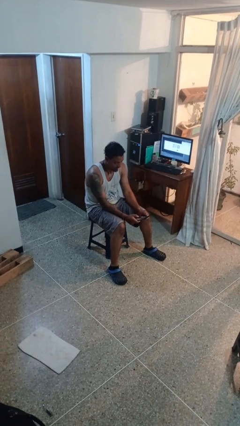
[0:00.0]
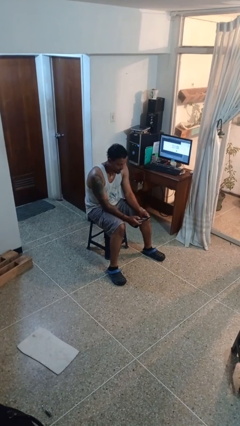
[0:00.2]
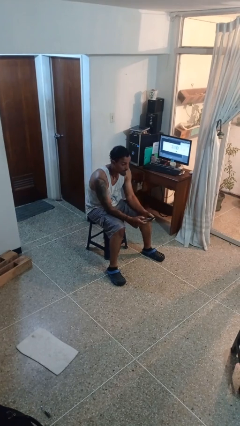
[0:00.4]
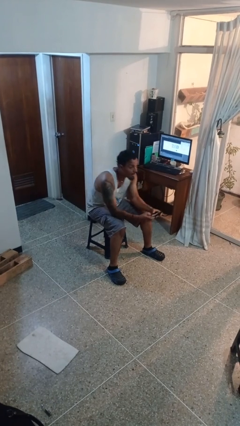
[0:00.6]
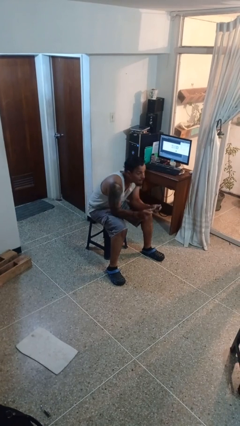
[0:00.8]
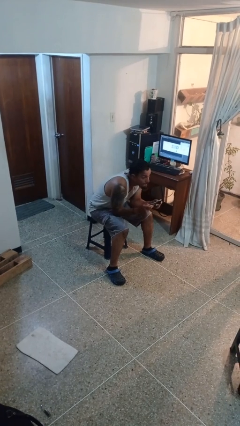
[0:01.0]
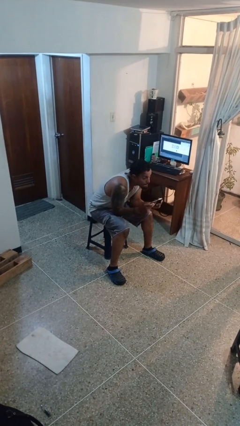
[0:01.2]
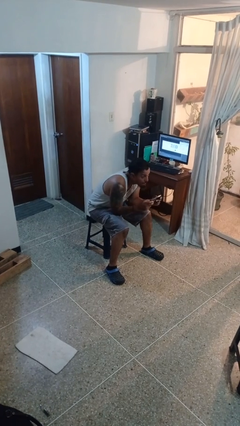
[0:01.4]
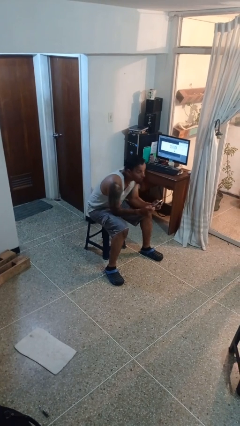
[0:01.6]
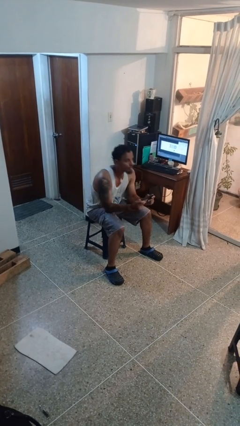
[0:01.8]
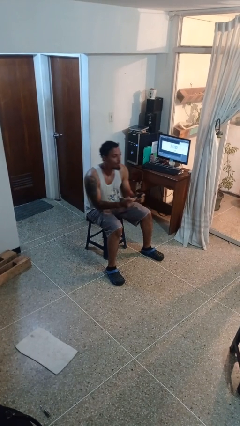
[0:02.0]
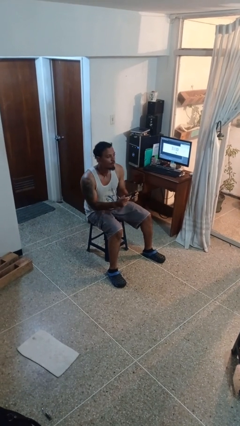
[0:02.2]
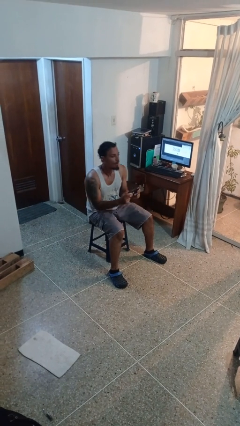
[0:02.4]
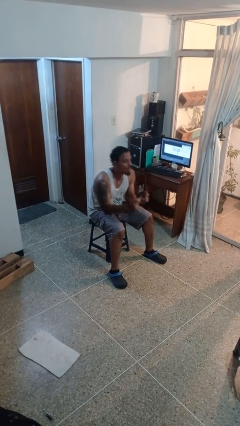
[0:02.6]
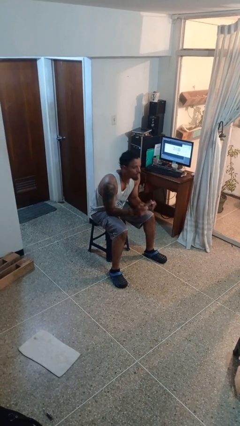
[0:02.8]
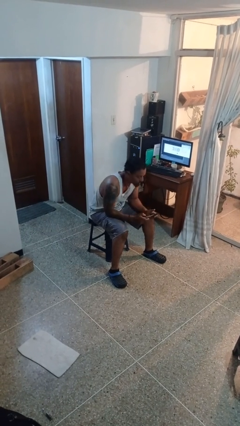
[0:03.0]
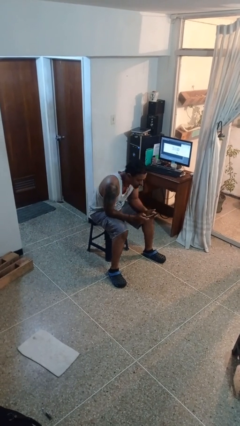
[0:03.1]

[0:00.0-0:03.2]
person interacts with handheld game

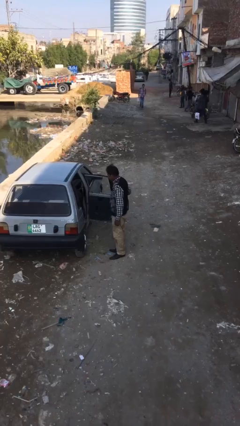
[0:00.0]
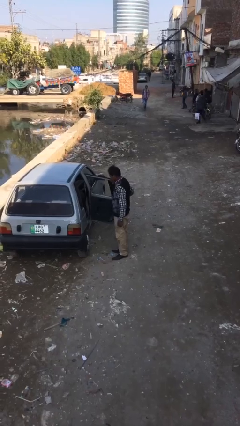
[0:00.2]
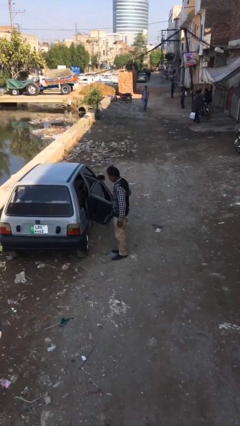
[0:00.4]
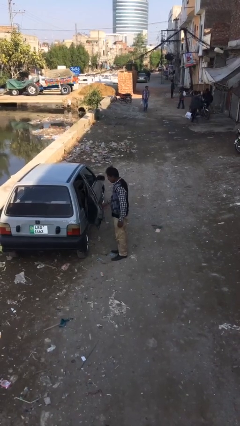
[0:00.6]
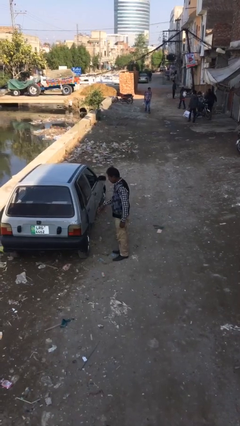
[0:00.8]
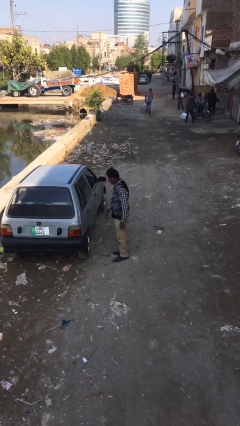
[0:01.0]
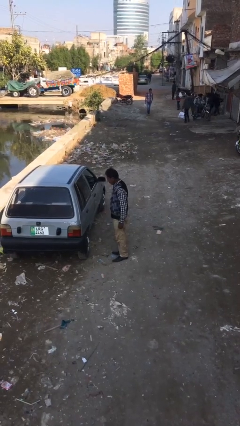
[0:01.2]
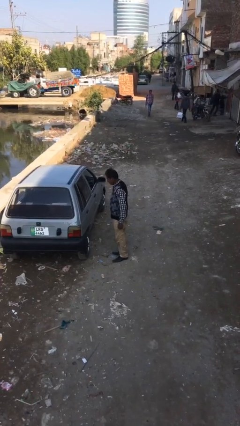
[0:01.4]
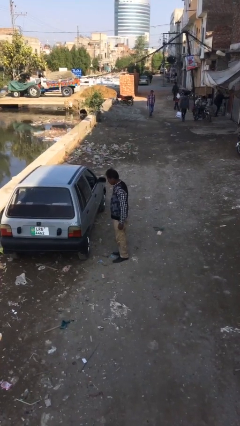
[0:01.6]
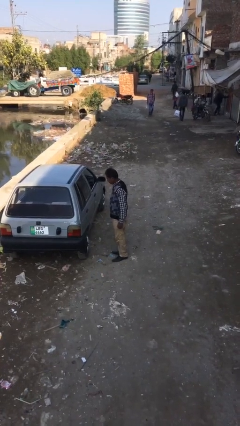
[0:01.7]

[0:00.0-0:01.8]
person closes car door

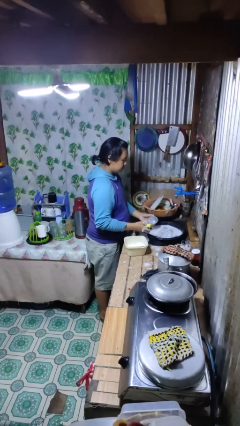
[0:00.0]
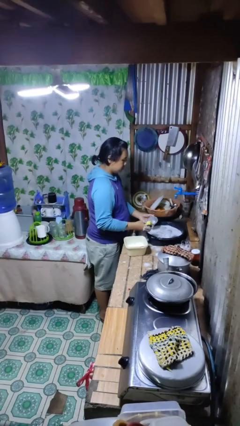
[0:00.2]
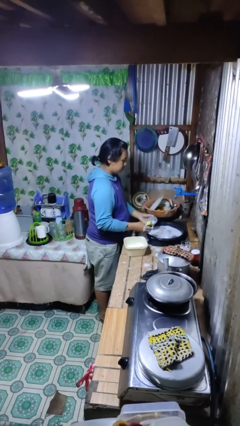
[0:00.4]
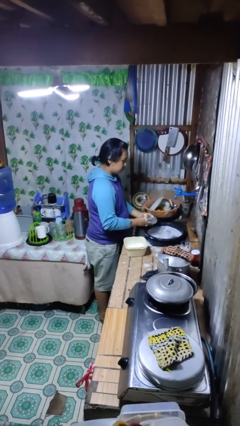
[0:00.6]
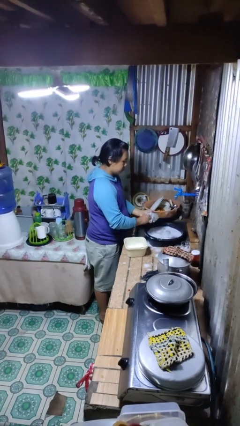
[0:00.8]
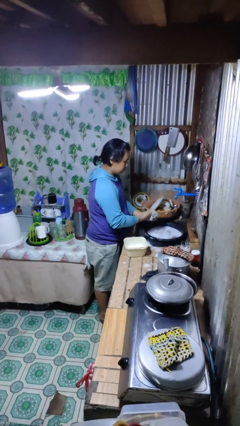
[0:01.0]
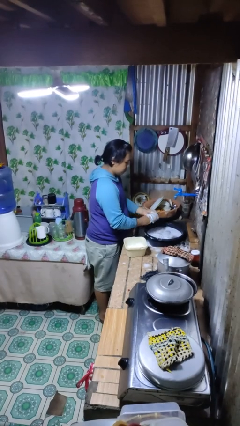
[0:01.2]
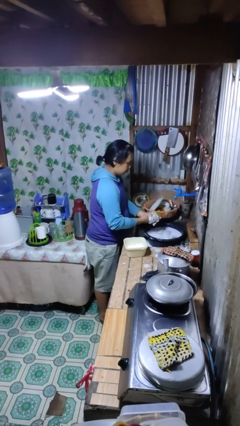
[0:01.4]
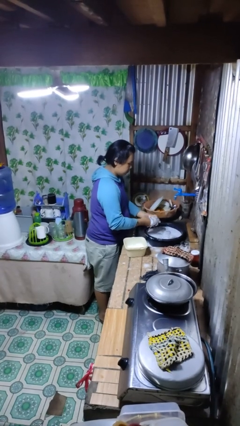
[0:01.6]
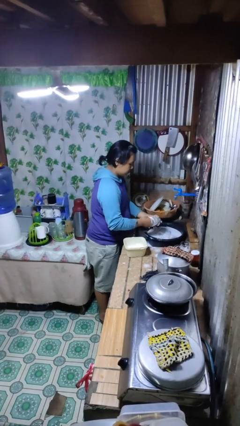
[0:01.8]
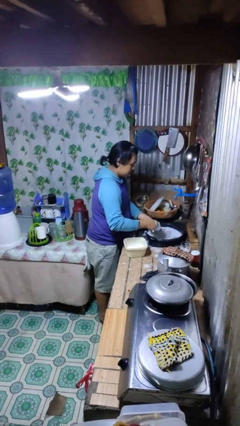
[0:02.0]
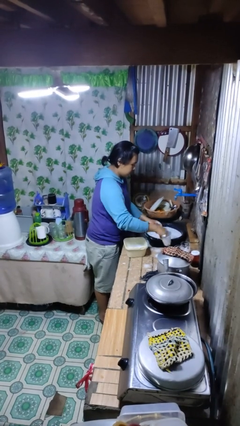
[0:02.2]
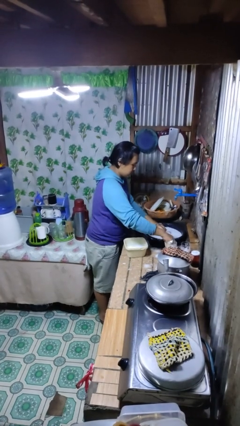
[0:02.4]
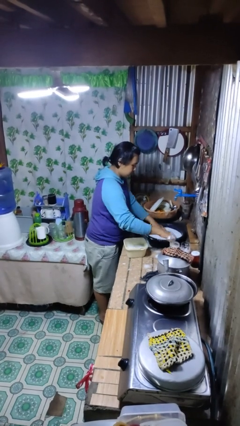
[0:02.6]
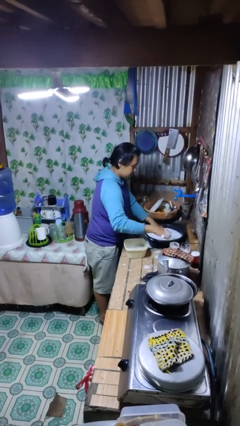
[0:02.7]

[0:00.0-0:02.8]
person washes dish

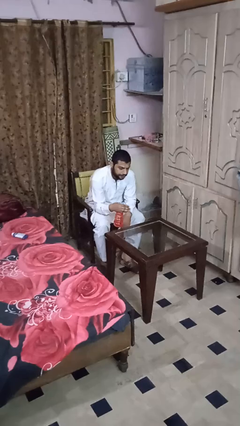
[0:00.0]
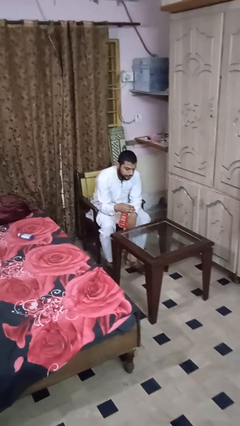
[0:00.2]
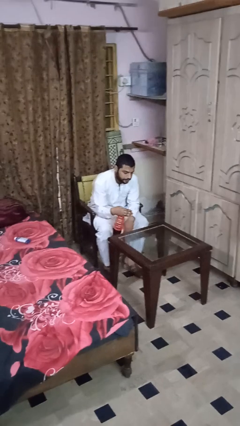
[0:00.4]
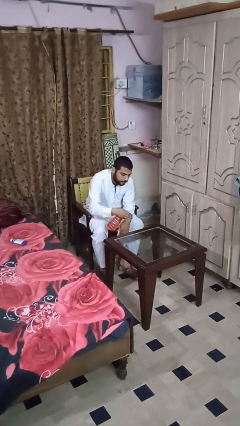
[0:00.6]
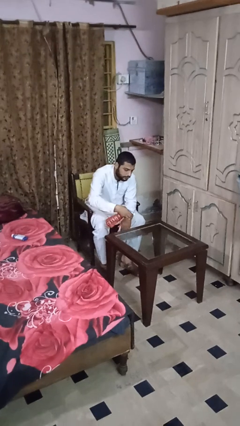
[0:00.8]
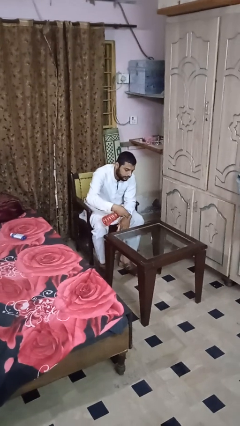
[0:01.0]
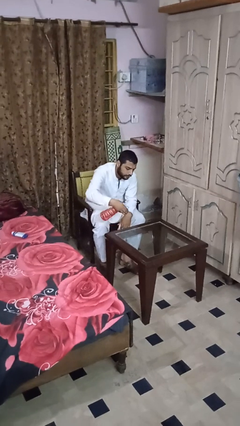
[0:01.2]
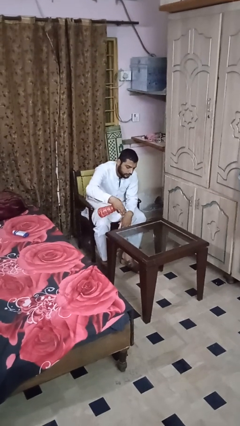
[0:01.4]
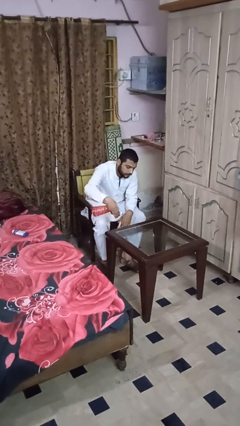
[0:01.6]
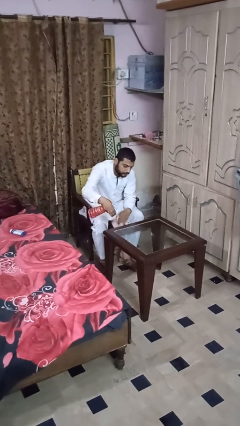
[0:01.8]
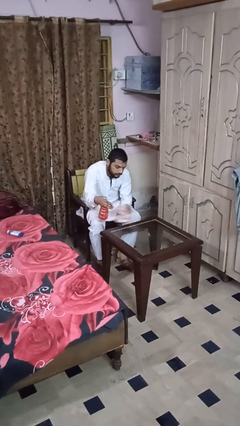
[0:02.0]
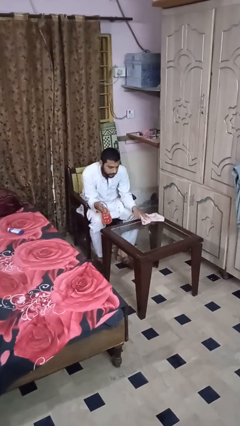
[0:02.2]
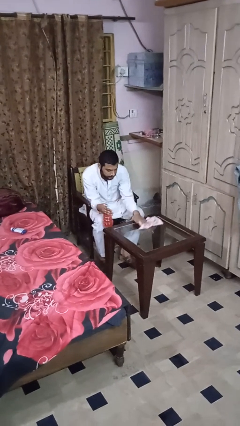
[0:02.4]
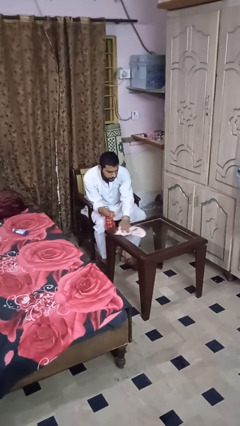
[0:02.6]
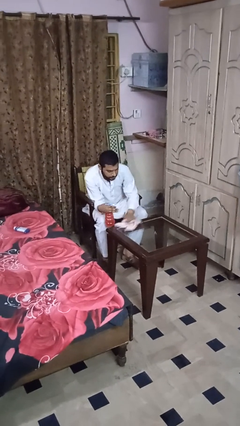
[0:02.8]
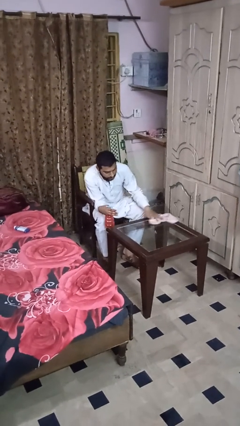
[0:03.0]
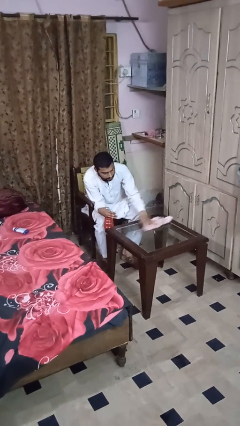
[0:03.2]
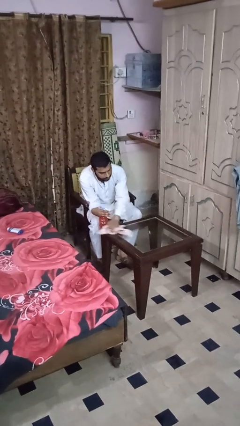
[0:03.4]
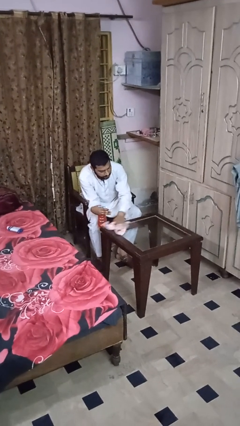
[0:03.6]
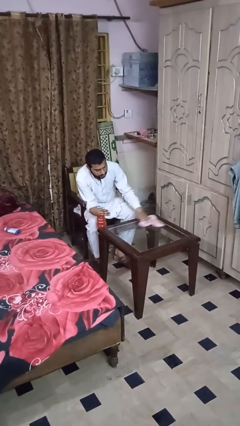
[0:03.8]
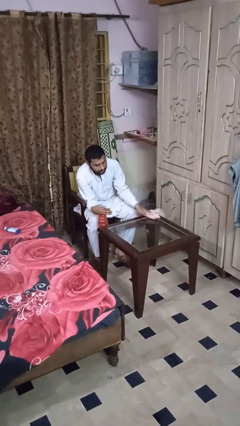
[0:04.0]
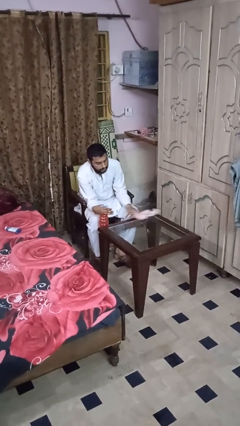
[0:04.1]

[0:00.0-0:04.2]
person sprays from bottle

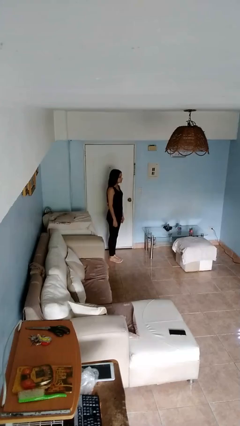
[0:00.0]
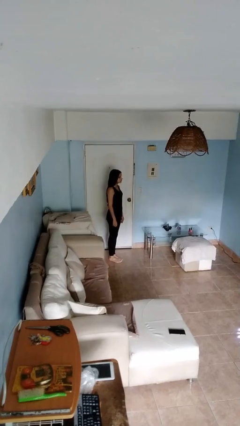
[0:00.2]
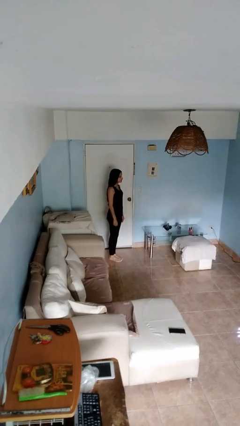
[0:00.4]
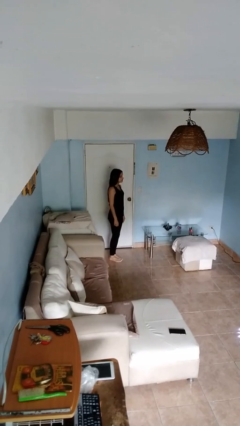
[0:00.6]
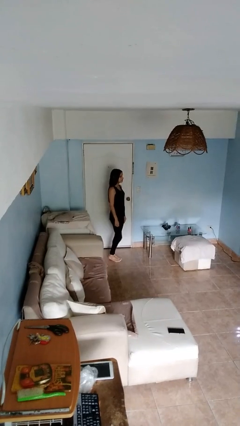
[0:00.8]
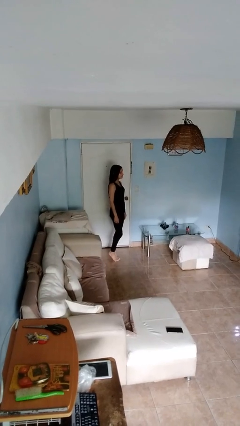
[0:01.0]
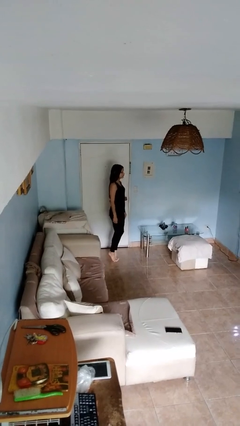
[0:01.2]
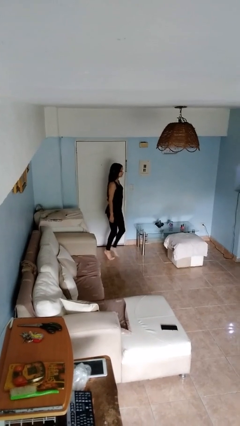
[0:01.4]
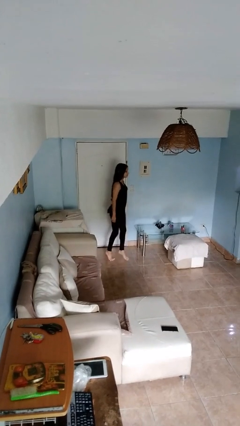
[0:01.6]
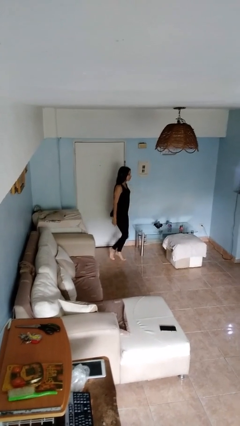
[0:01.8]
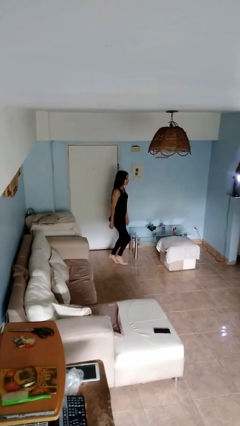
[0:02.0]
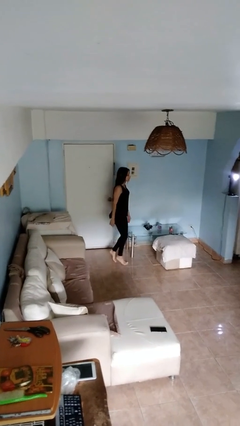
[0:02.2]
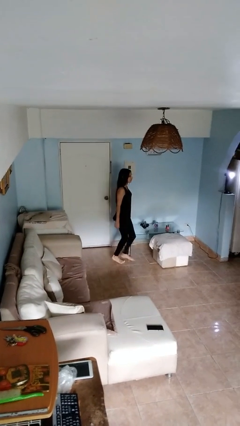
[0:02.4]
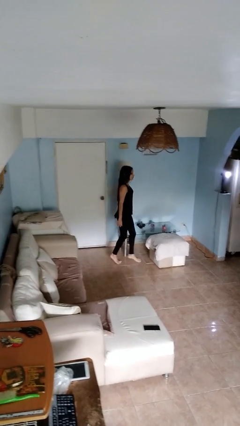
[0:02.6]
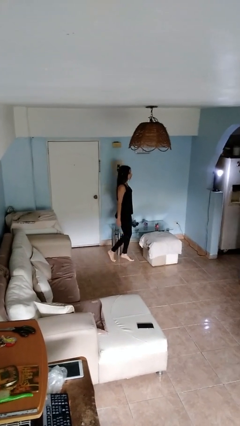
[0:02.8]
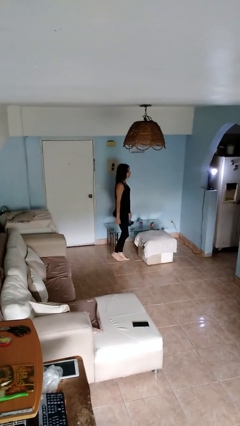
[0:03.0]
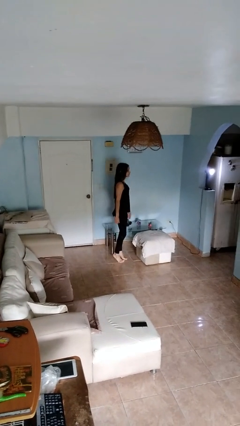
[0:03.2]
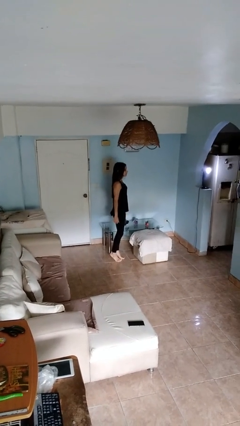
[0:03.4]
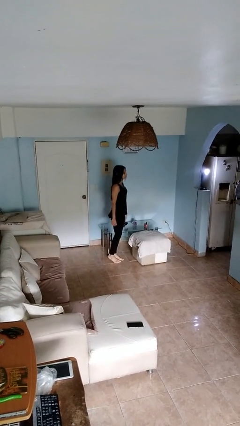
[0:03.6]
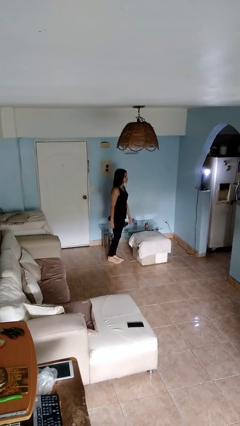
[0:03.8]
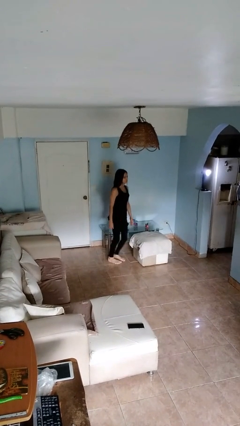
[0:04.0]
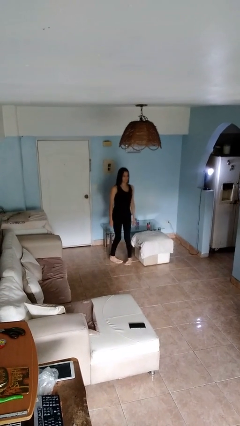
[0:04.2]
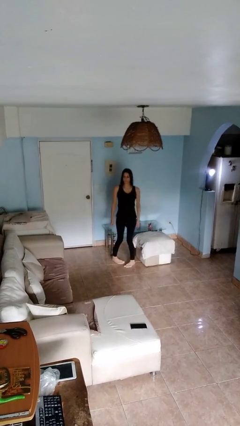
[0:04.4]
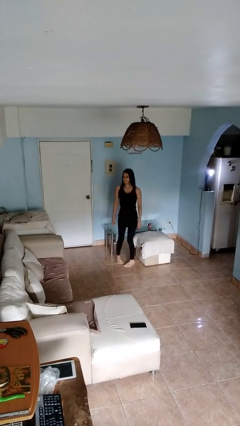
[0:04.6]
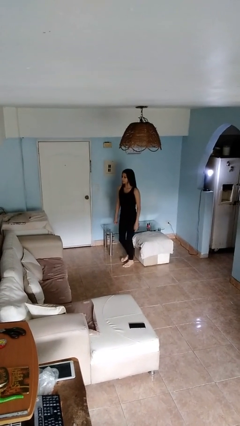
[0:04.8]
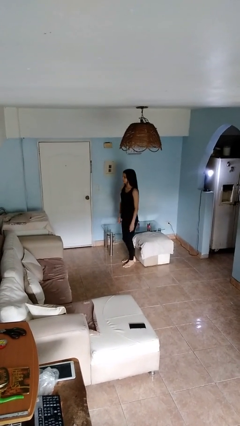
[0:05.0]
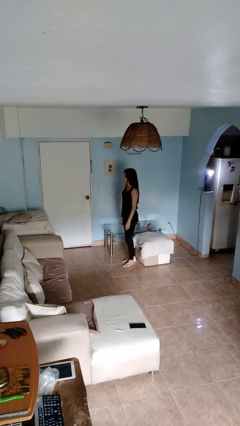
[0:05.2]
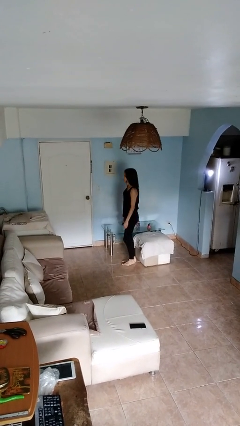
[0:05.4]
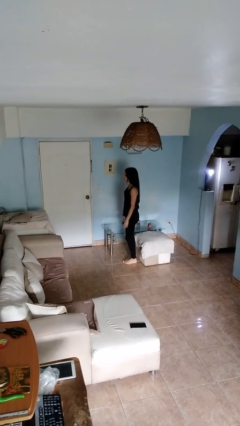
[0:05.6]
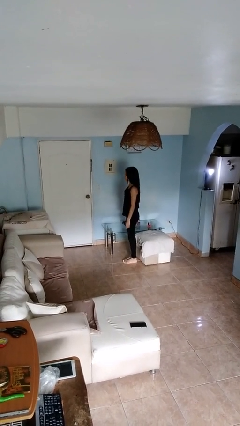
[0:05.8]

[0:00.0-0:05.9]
person walks tiptoe
